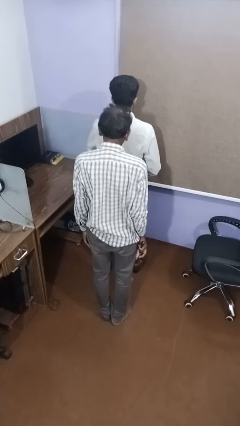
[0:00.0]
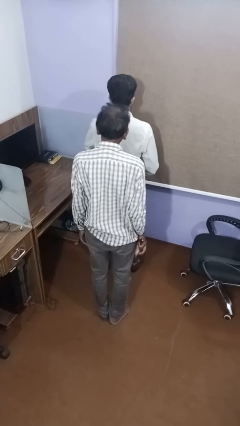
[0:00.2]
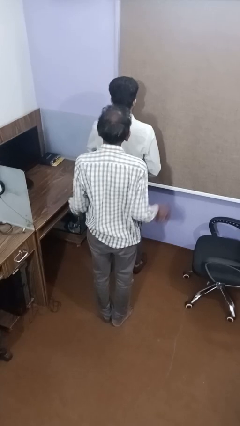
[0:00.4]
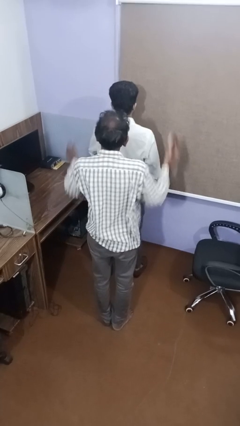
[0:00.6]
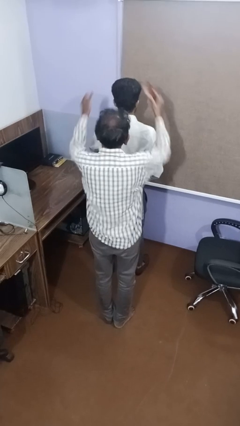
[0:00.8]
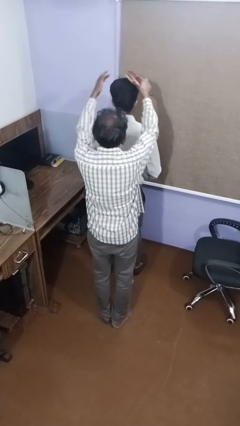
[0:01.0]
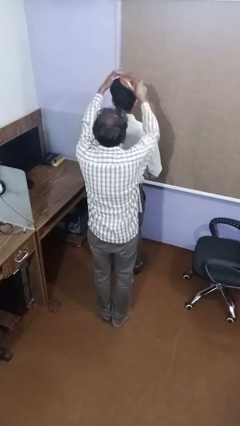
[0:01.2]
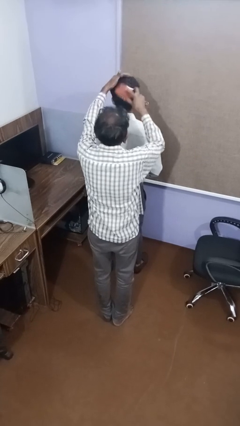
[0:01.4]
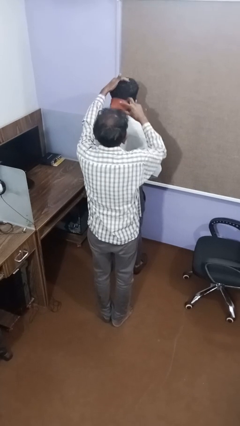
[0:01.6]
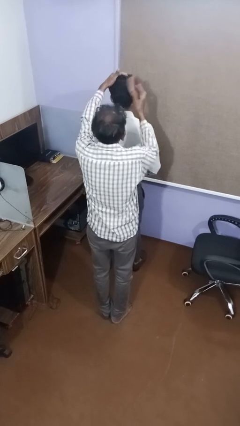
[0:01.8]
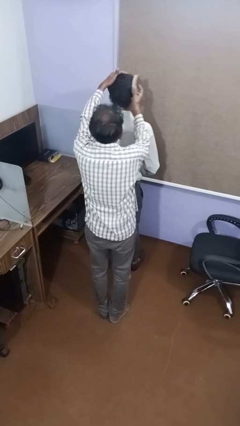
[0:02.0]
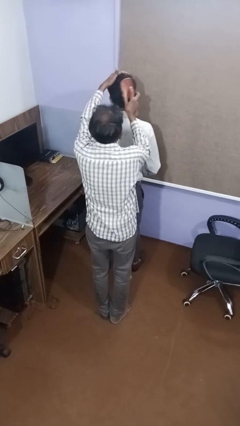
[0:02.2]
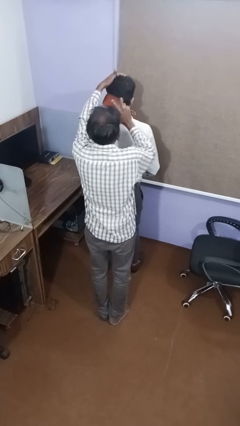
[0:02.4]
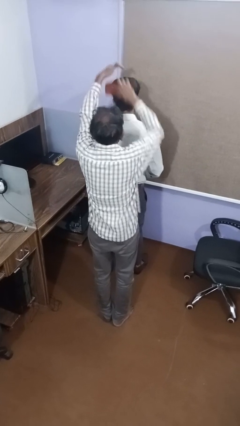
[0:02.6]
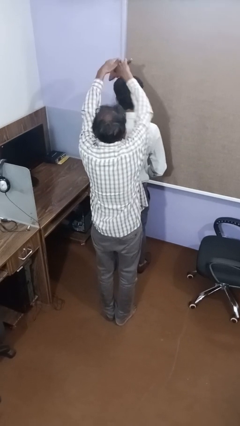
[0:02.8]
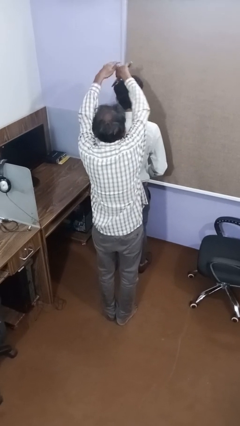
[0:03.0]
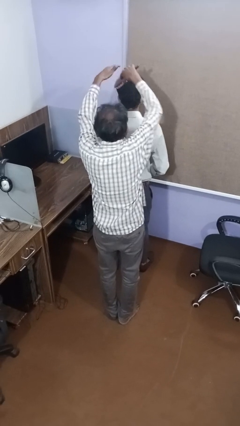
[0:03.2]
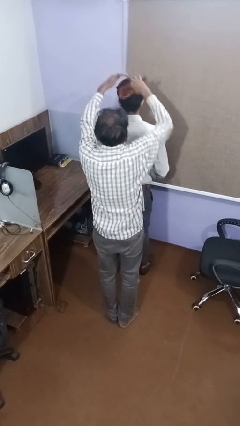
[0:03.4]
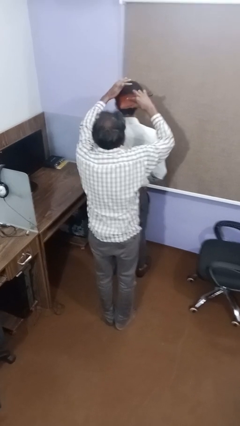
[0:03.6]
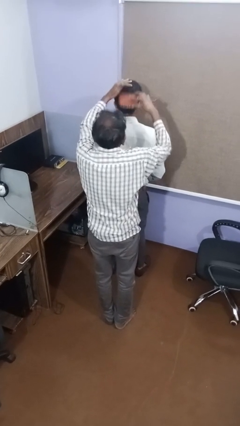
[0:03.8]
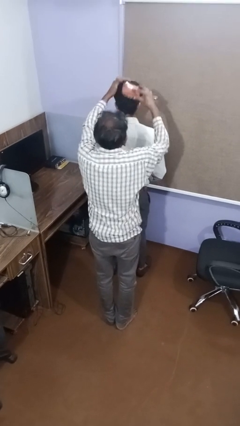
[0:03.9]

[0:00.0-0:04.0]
person brushes hair of person

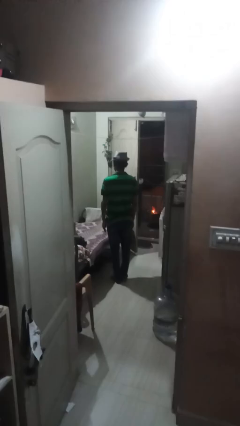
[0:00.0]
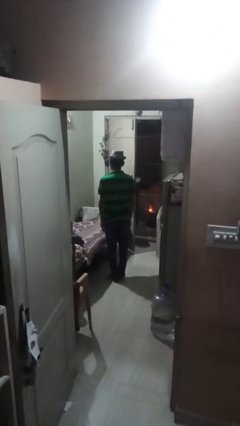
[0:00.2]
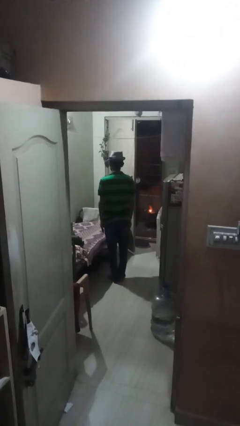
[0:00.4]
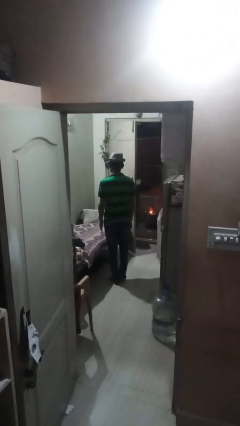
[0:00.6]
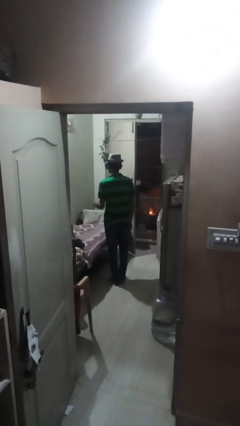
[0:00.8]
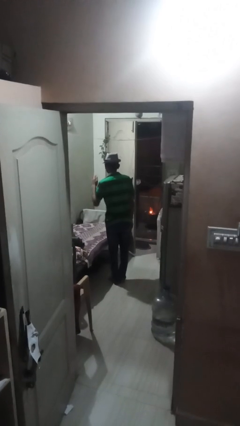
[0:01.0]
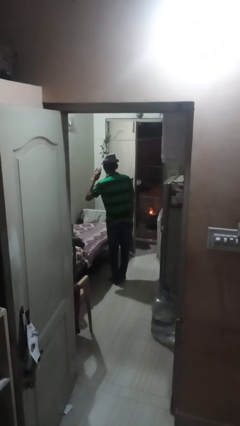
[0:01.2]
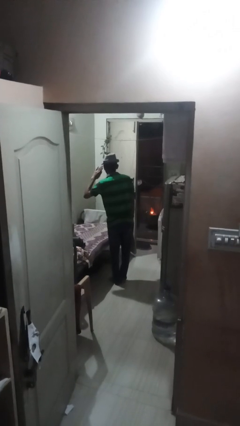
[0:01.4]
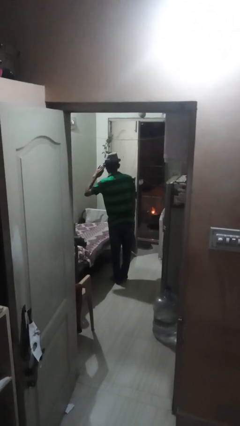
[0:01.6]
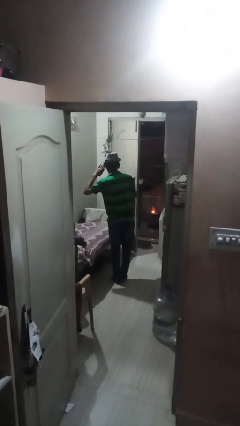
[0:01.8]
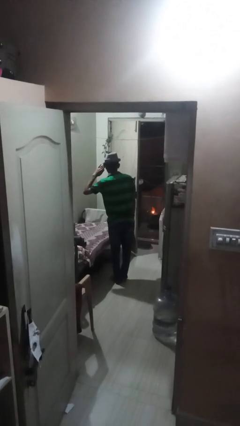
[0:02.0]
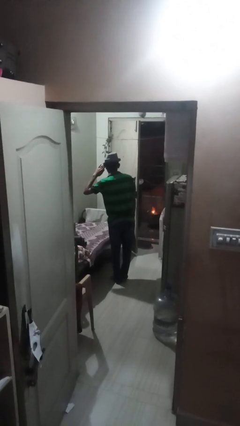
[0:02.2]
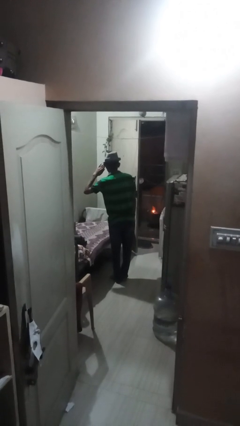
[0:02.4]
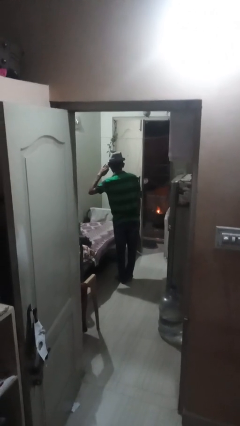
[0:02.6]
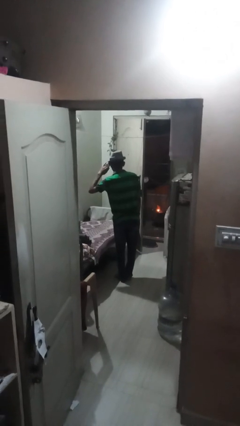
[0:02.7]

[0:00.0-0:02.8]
person salutes

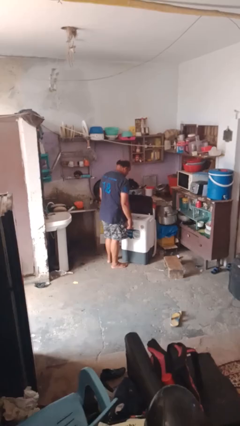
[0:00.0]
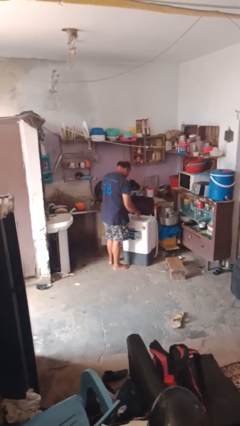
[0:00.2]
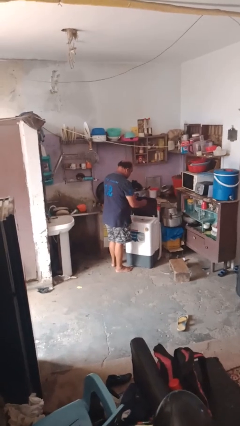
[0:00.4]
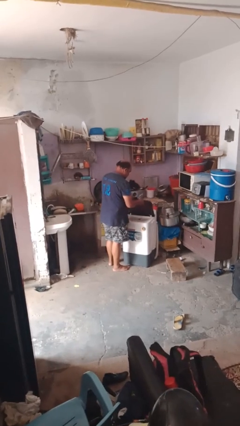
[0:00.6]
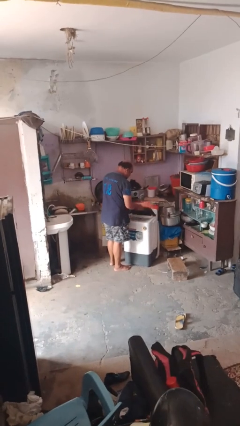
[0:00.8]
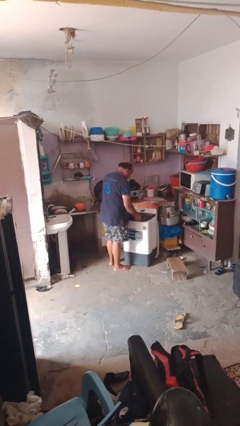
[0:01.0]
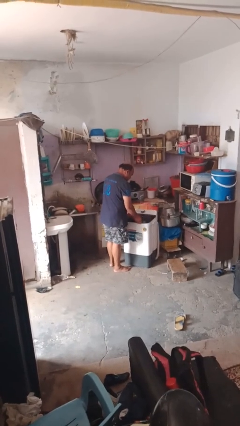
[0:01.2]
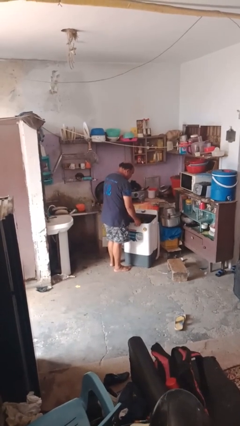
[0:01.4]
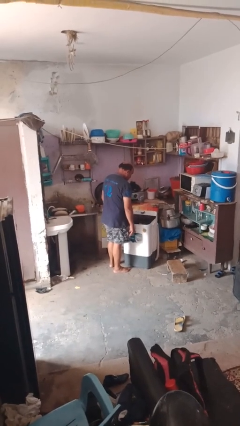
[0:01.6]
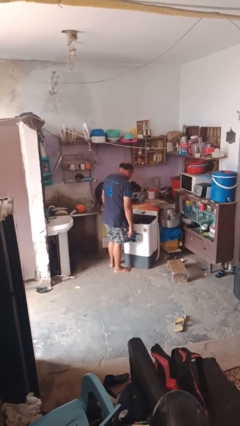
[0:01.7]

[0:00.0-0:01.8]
person closes clothes washer

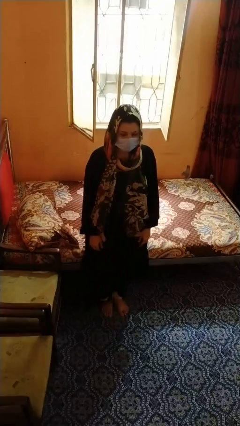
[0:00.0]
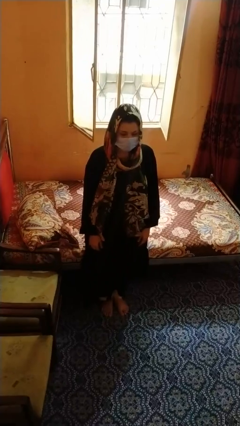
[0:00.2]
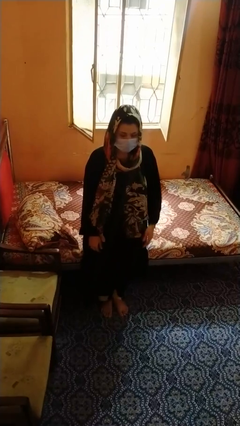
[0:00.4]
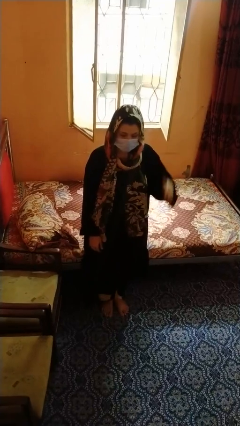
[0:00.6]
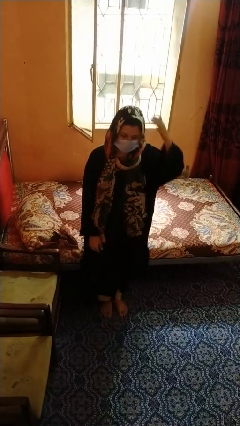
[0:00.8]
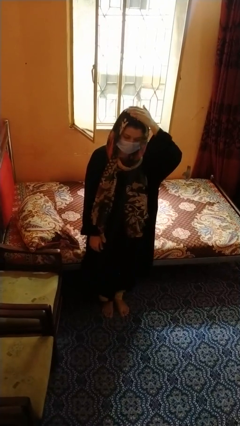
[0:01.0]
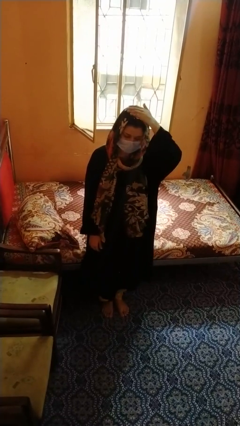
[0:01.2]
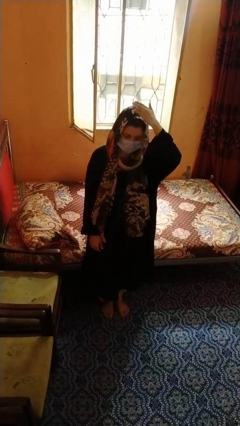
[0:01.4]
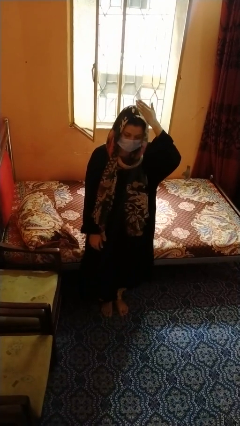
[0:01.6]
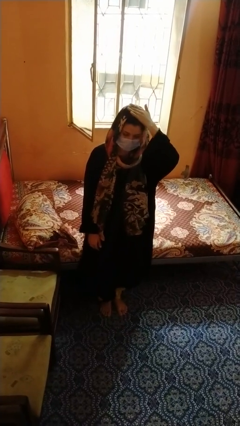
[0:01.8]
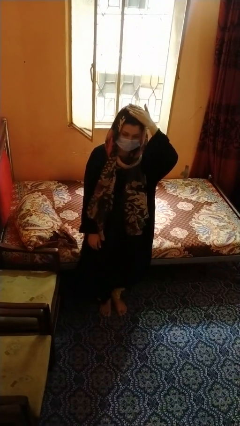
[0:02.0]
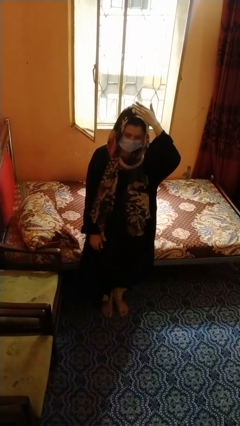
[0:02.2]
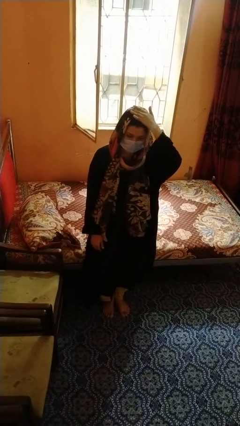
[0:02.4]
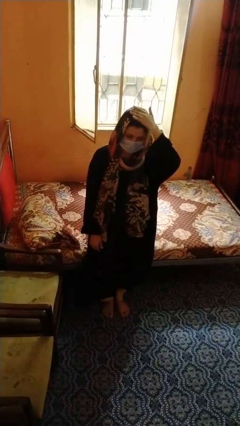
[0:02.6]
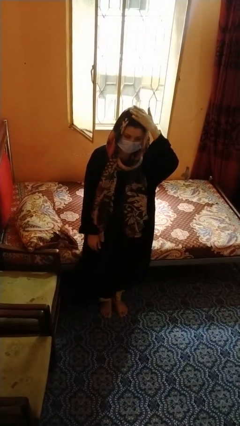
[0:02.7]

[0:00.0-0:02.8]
person pats head

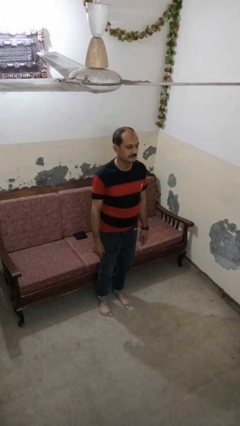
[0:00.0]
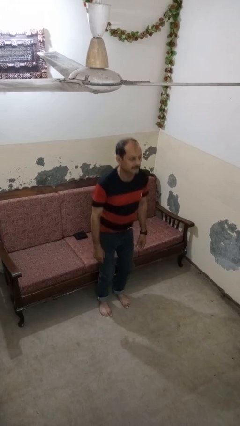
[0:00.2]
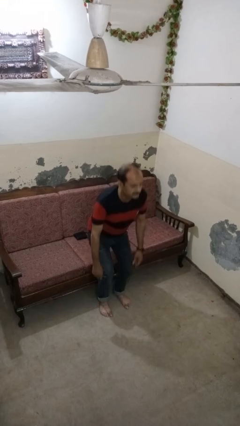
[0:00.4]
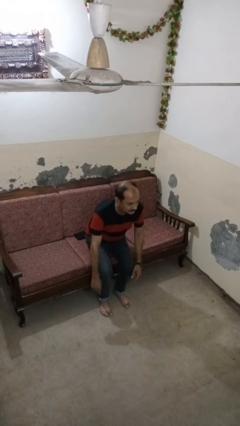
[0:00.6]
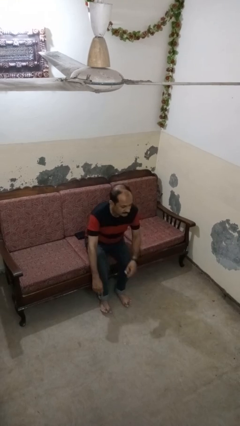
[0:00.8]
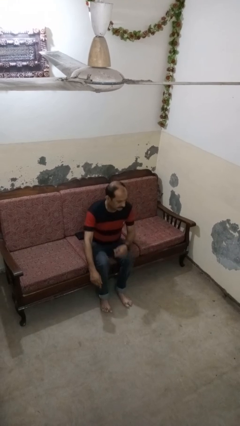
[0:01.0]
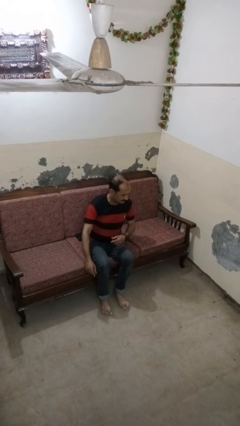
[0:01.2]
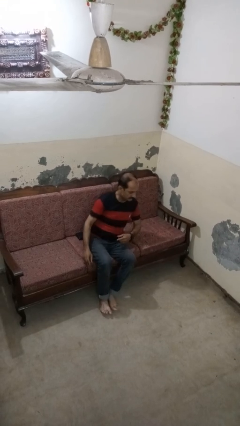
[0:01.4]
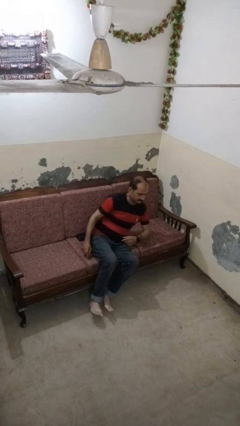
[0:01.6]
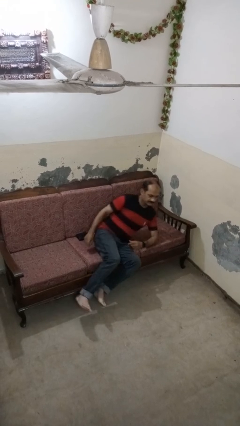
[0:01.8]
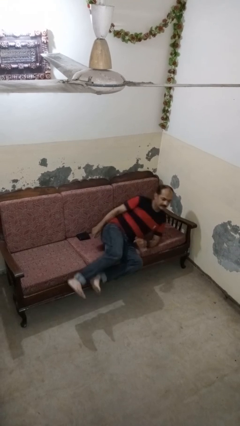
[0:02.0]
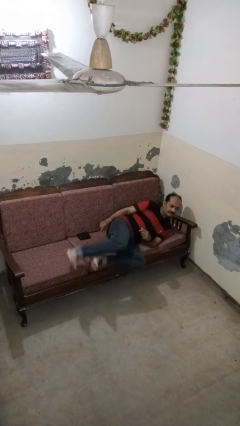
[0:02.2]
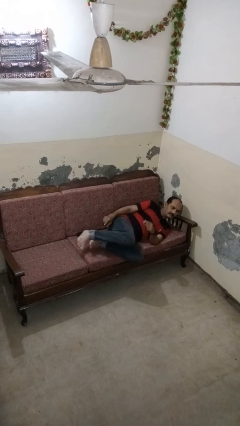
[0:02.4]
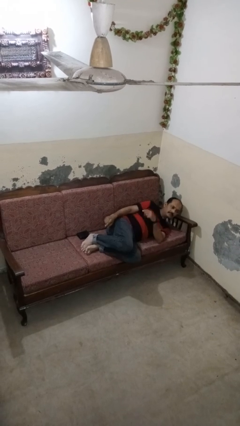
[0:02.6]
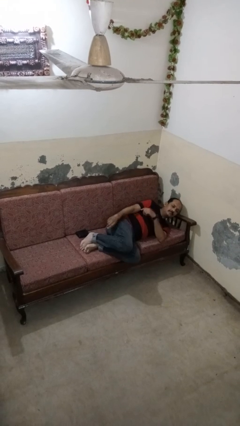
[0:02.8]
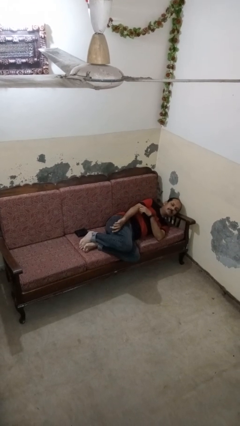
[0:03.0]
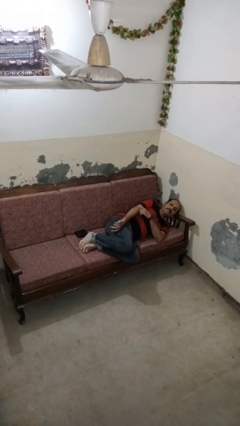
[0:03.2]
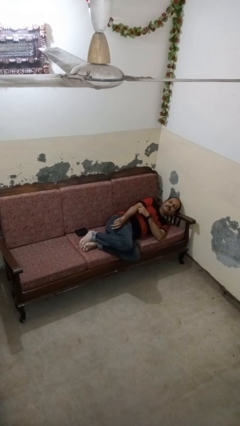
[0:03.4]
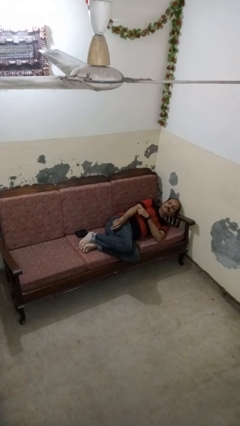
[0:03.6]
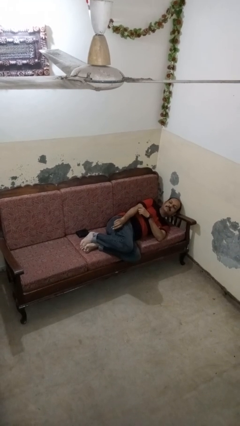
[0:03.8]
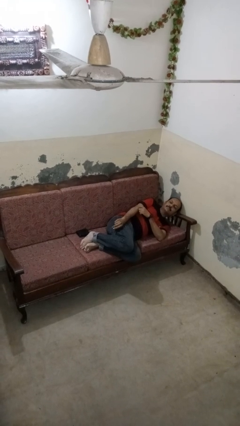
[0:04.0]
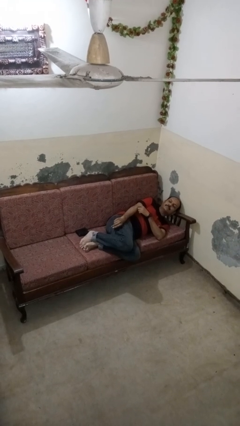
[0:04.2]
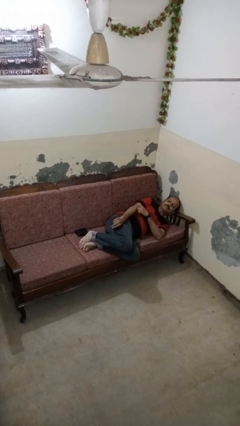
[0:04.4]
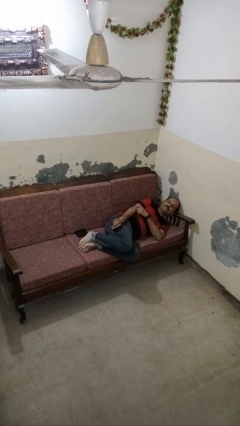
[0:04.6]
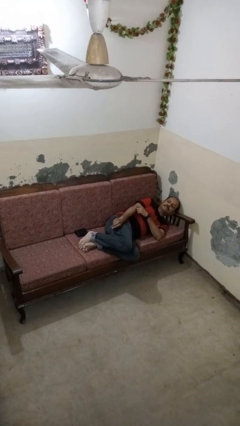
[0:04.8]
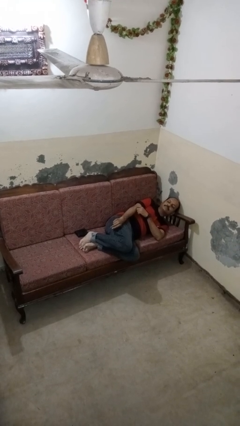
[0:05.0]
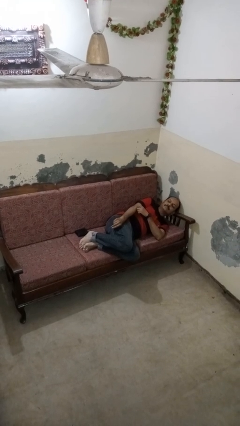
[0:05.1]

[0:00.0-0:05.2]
person lies down on couch

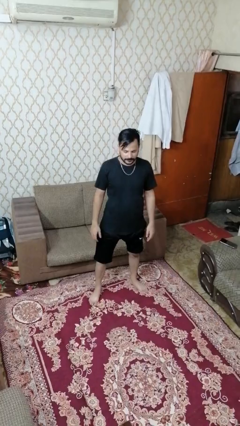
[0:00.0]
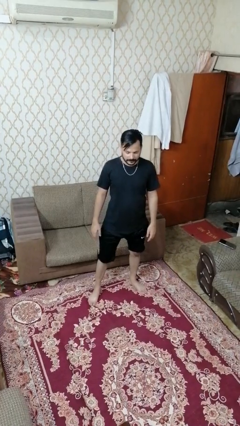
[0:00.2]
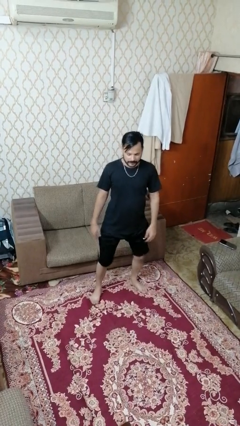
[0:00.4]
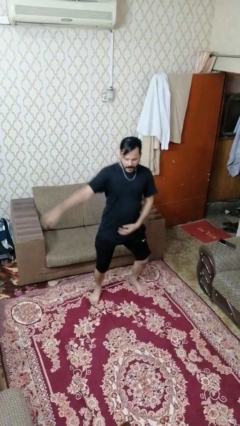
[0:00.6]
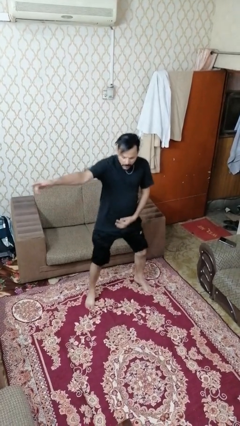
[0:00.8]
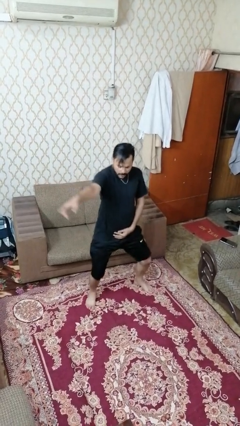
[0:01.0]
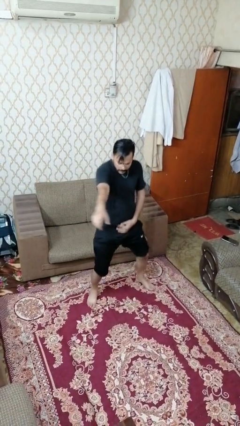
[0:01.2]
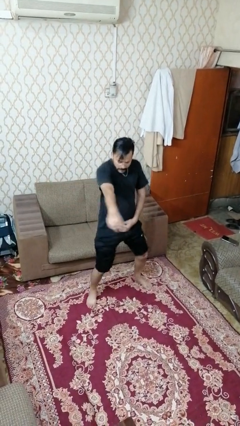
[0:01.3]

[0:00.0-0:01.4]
person dances in place
